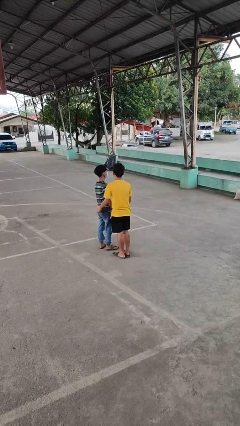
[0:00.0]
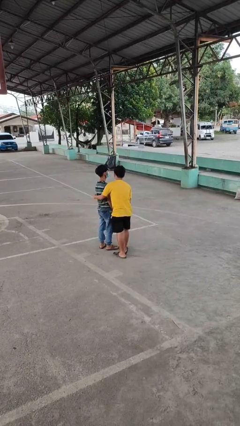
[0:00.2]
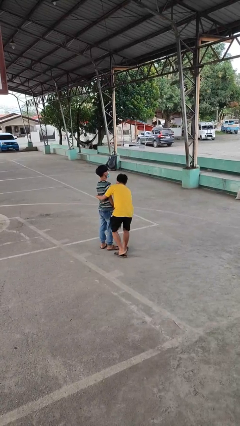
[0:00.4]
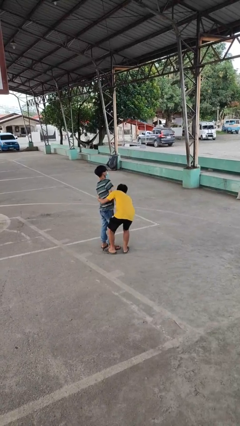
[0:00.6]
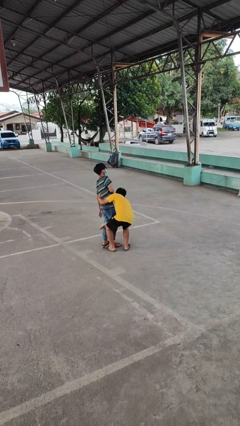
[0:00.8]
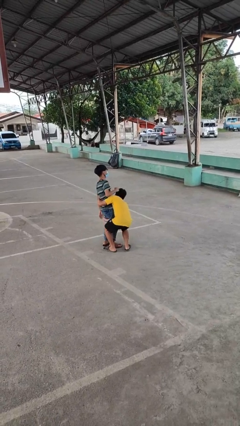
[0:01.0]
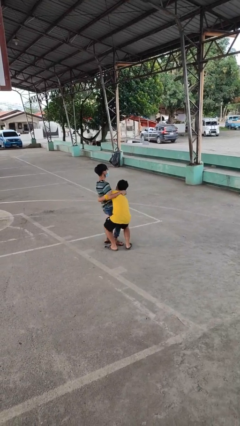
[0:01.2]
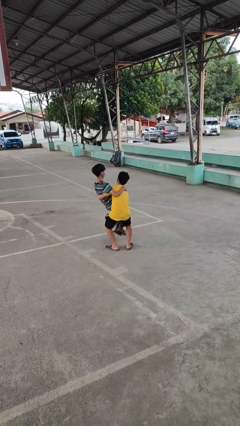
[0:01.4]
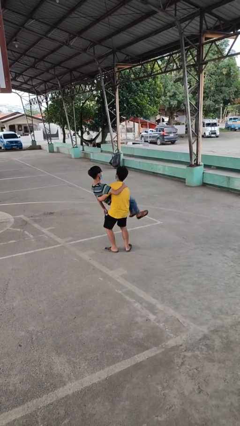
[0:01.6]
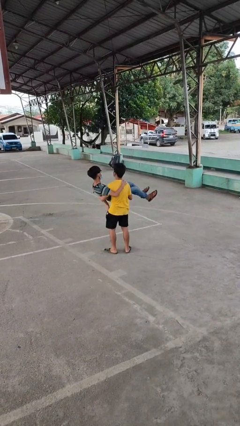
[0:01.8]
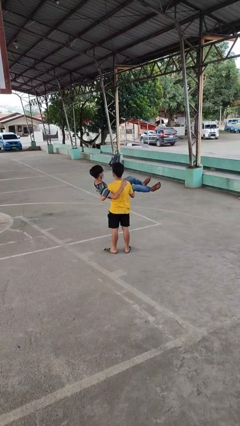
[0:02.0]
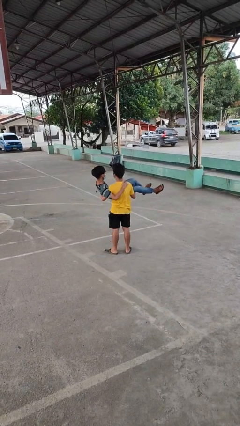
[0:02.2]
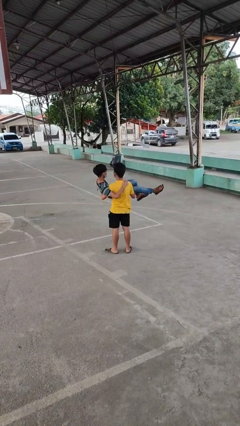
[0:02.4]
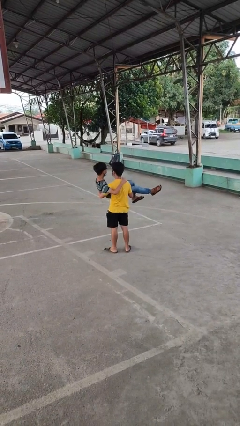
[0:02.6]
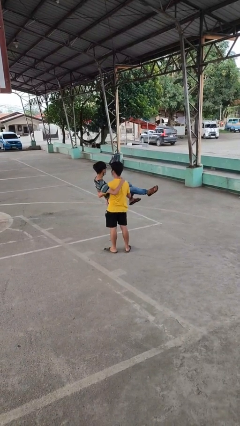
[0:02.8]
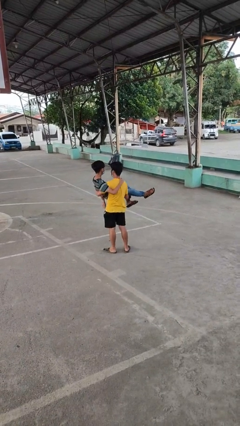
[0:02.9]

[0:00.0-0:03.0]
person picks up person

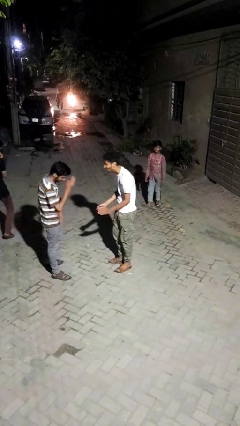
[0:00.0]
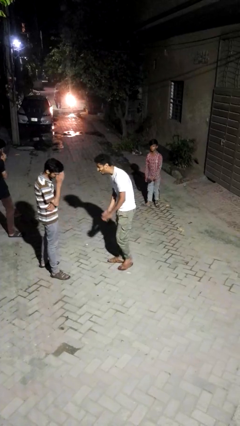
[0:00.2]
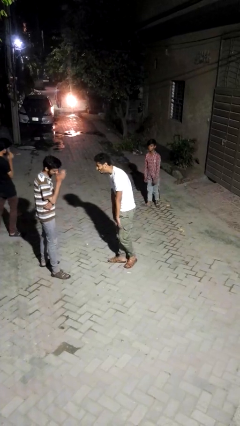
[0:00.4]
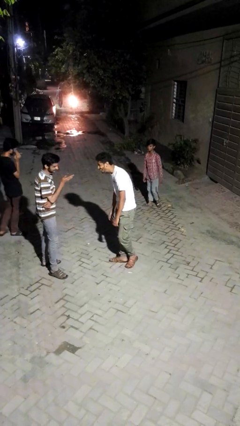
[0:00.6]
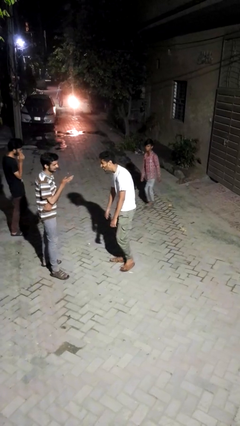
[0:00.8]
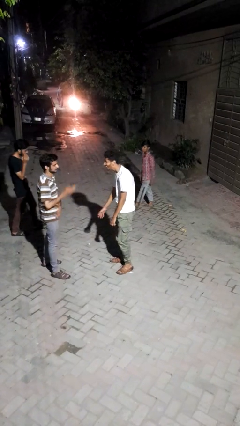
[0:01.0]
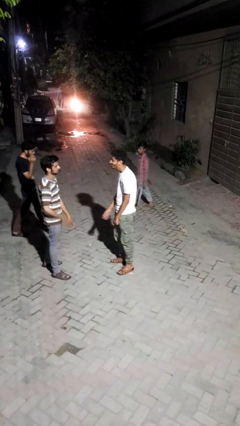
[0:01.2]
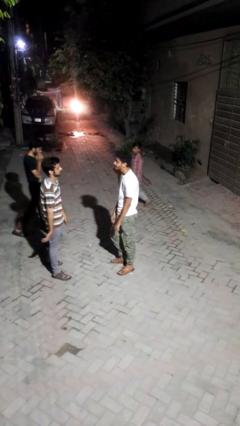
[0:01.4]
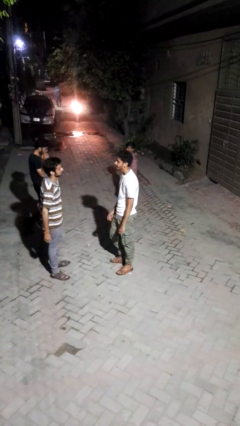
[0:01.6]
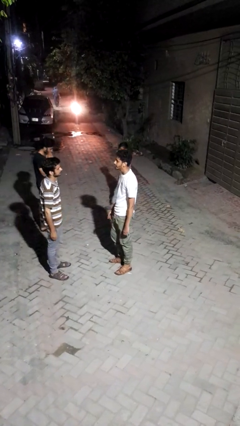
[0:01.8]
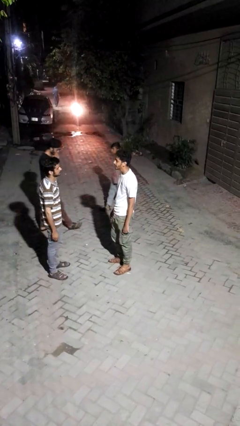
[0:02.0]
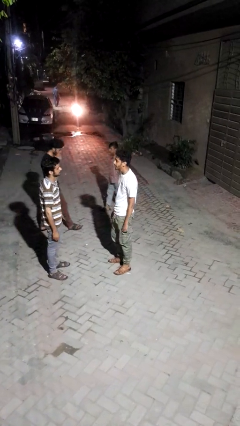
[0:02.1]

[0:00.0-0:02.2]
person laughs with person

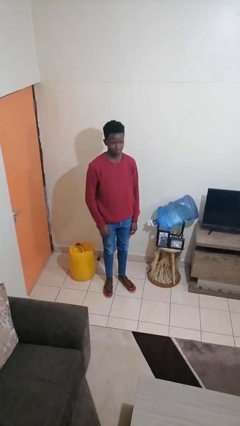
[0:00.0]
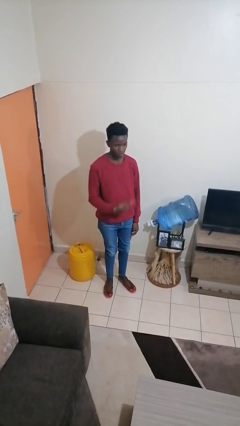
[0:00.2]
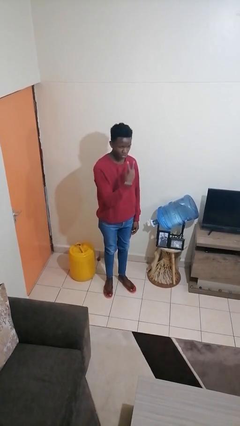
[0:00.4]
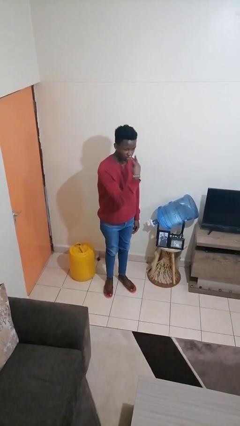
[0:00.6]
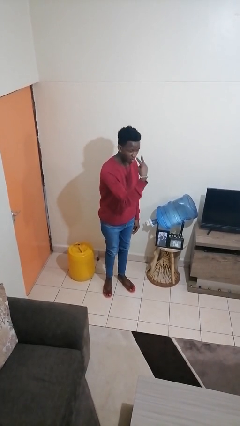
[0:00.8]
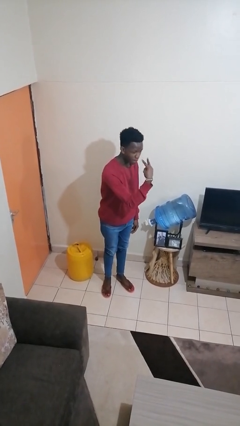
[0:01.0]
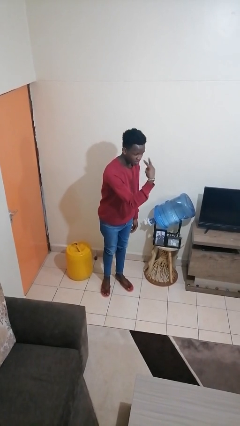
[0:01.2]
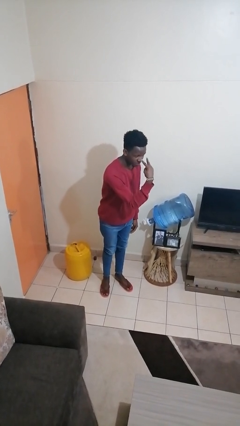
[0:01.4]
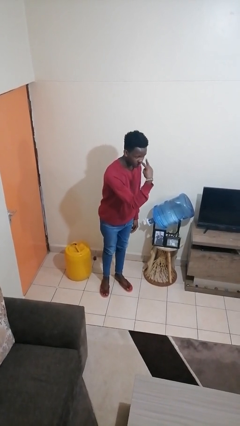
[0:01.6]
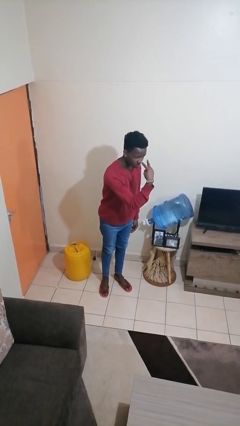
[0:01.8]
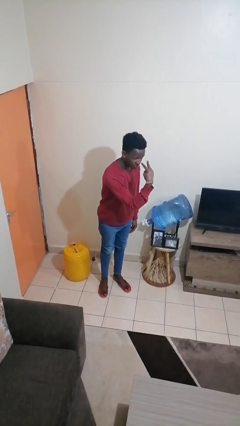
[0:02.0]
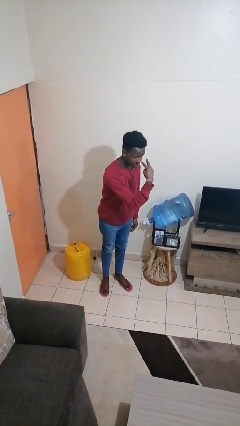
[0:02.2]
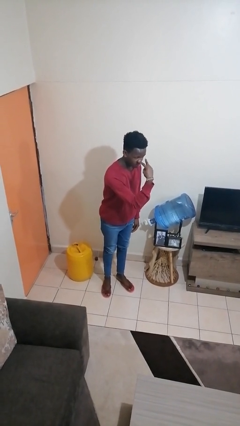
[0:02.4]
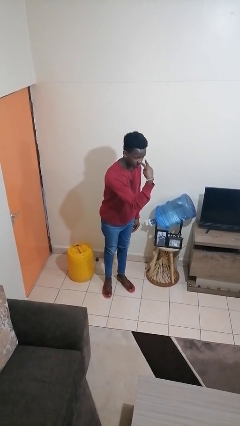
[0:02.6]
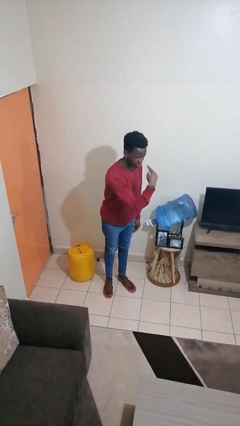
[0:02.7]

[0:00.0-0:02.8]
person gestures watch closely

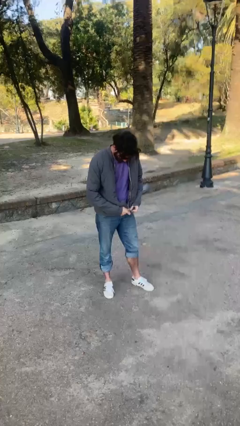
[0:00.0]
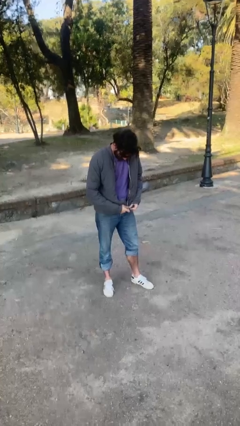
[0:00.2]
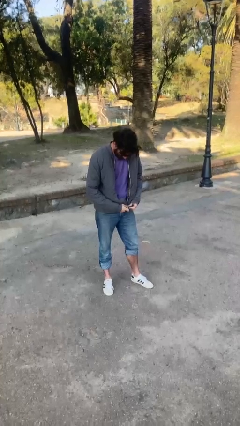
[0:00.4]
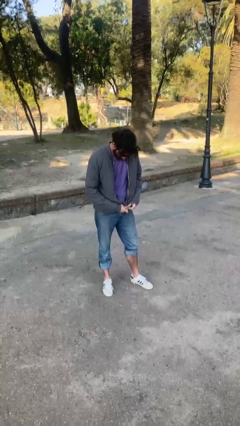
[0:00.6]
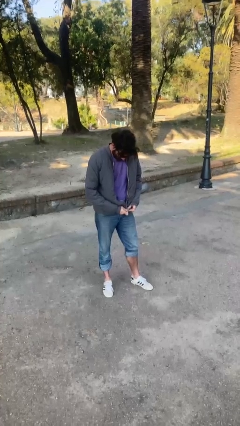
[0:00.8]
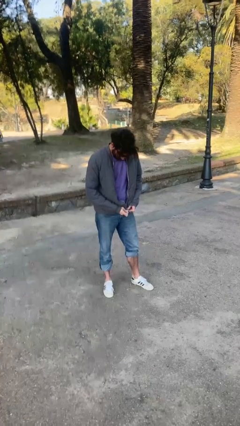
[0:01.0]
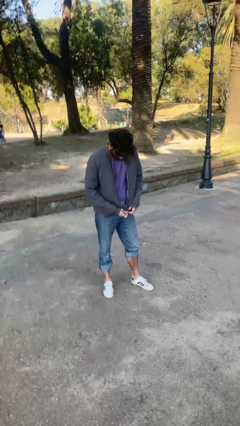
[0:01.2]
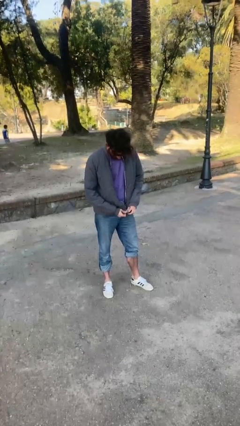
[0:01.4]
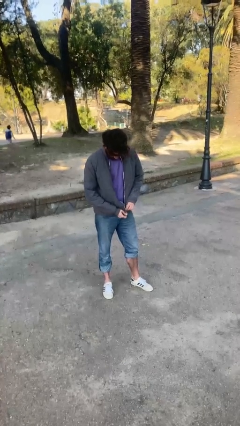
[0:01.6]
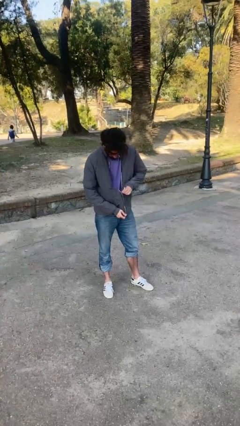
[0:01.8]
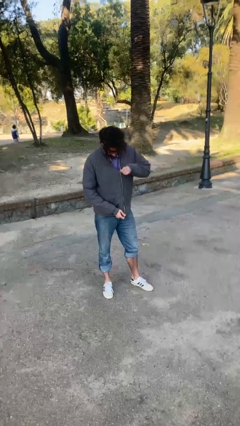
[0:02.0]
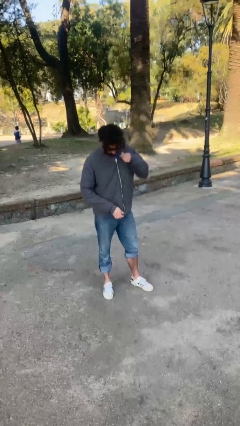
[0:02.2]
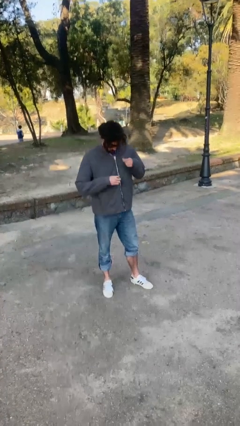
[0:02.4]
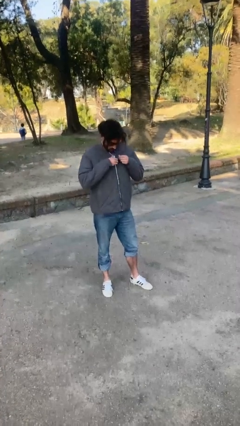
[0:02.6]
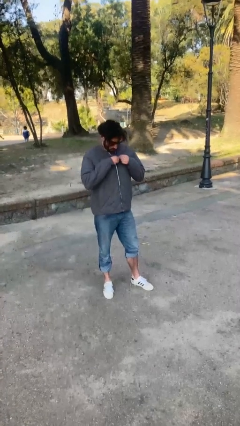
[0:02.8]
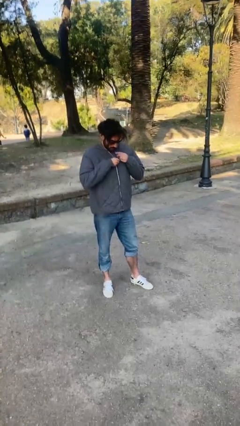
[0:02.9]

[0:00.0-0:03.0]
person zips up jacket

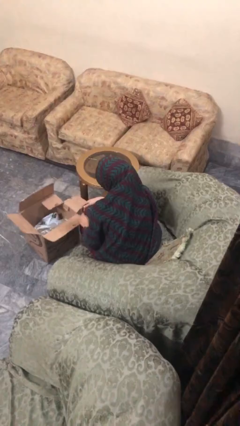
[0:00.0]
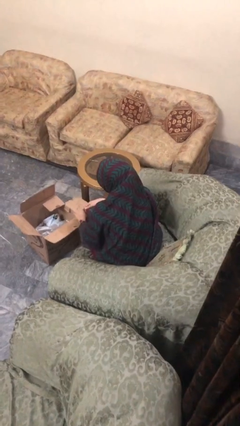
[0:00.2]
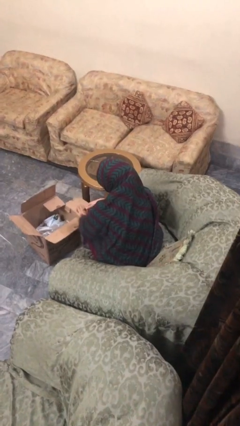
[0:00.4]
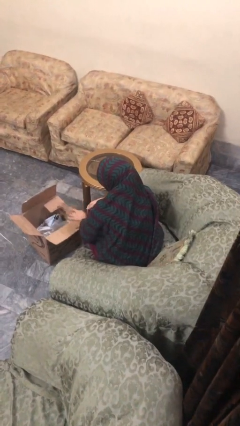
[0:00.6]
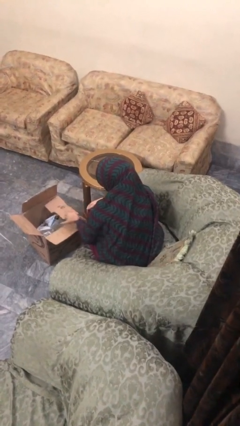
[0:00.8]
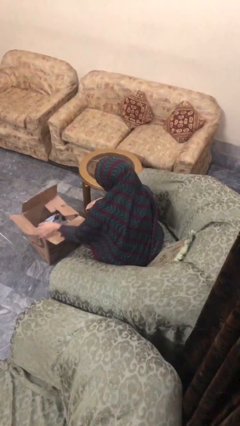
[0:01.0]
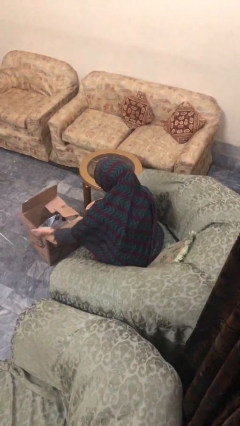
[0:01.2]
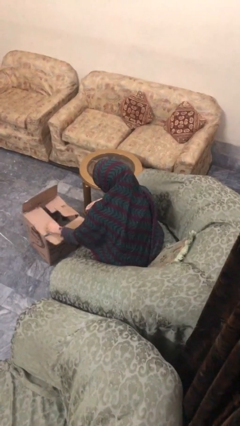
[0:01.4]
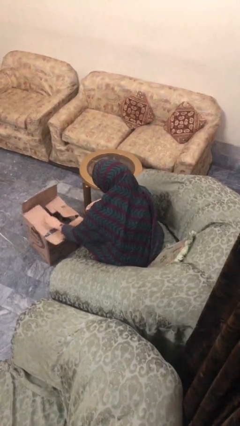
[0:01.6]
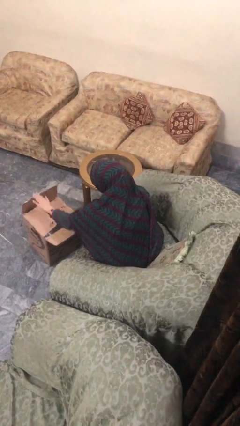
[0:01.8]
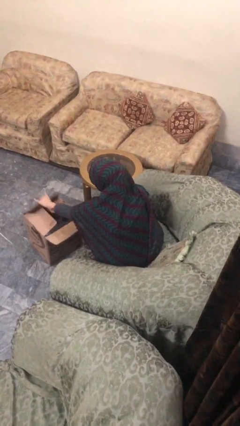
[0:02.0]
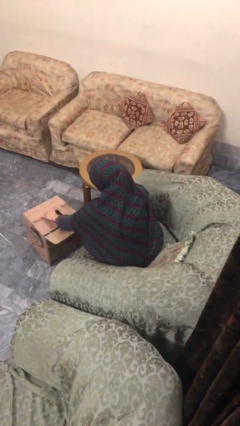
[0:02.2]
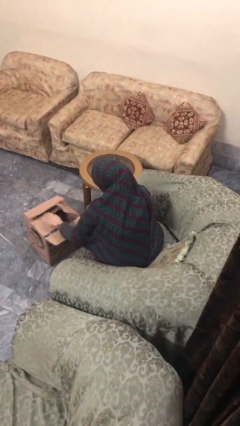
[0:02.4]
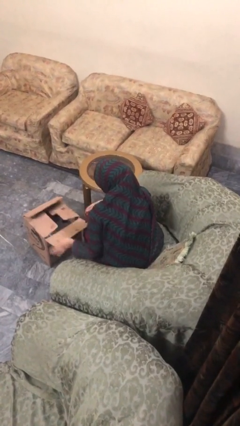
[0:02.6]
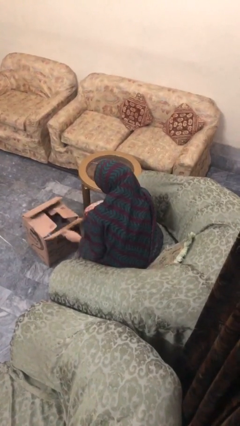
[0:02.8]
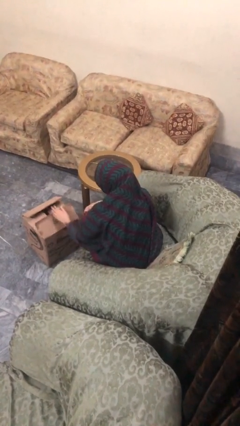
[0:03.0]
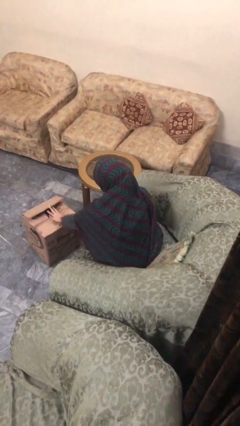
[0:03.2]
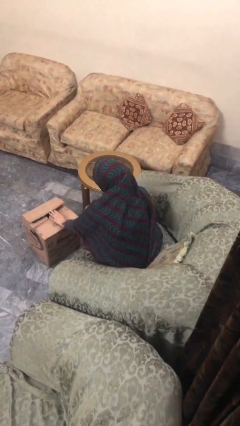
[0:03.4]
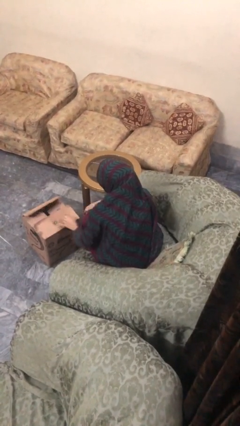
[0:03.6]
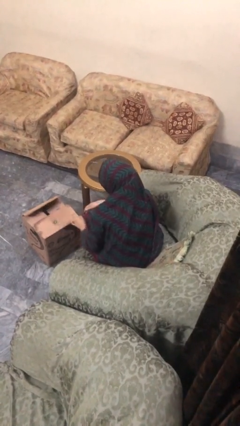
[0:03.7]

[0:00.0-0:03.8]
person closes box

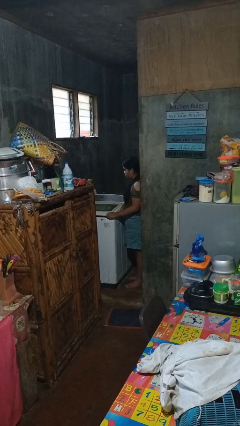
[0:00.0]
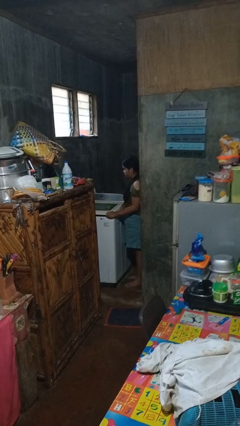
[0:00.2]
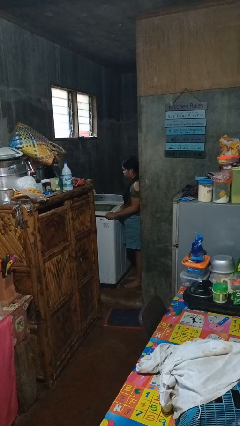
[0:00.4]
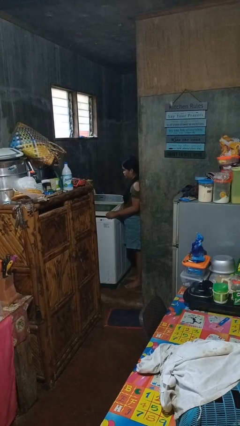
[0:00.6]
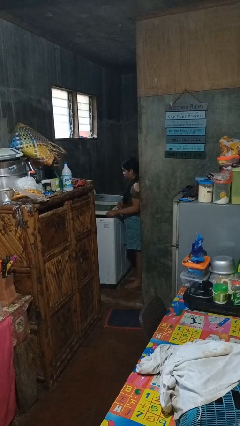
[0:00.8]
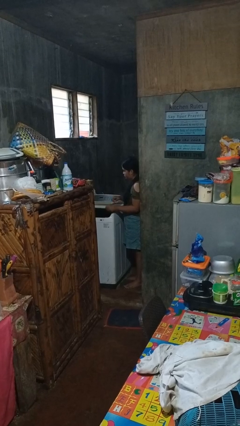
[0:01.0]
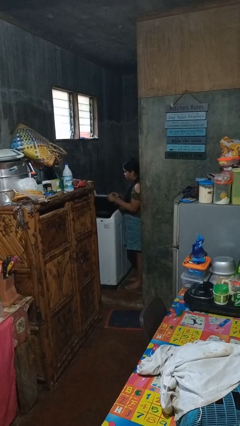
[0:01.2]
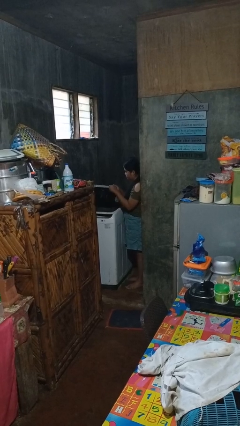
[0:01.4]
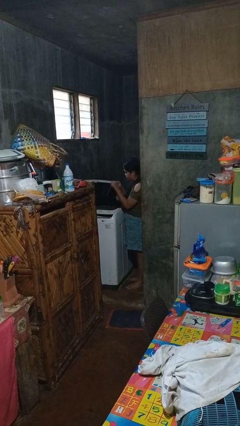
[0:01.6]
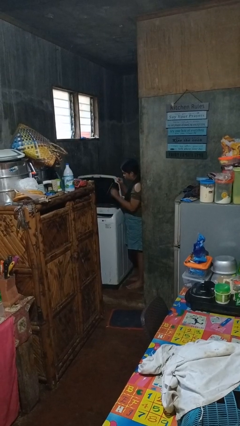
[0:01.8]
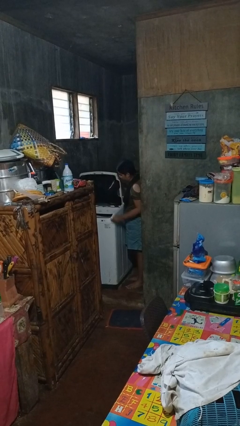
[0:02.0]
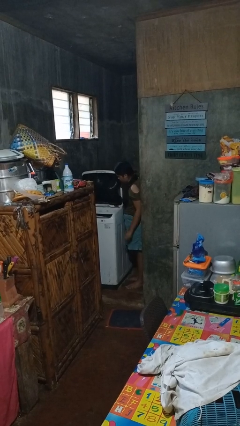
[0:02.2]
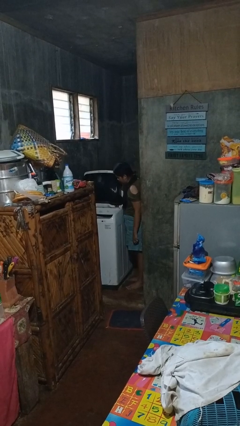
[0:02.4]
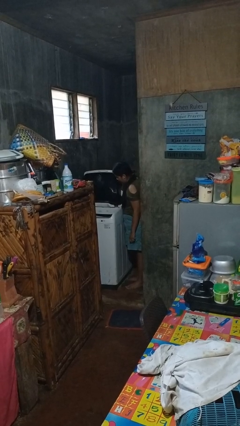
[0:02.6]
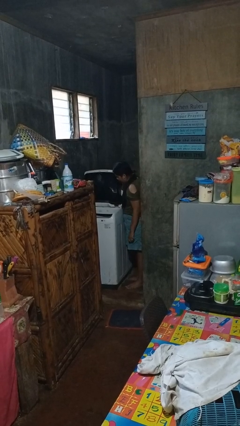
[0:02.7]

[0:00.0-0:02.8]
person opens clothes washer
